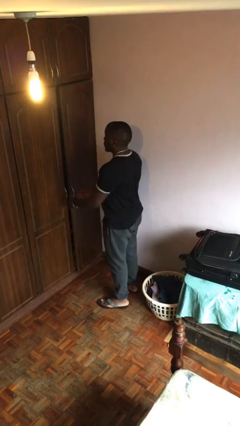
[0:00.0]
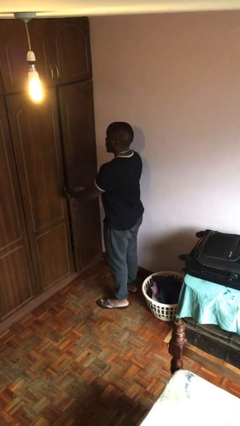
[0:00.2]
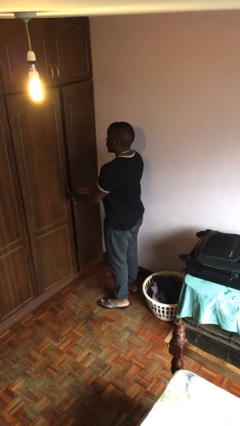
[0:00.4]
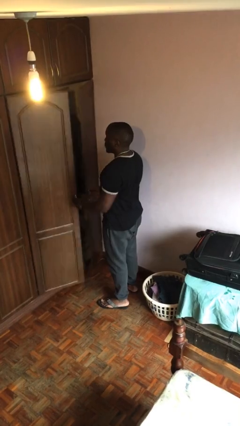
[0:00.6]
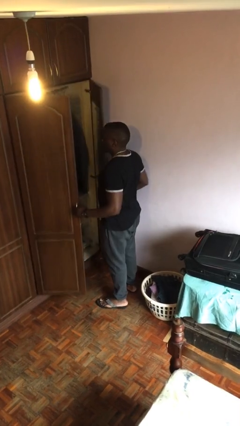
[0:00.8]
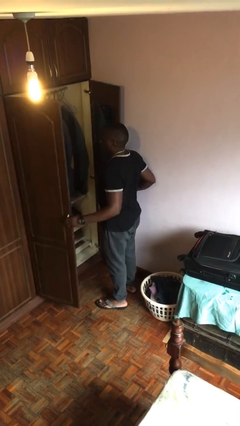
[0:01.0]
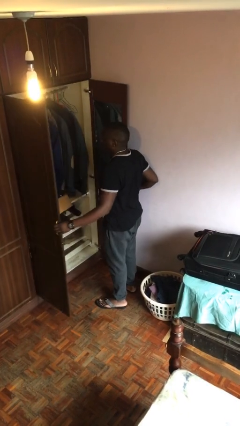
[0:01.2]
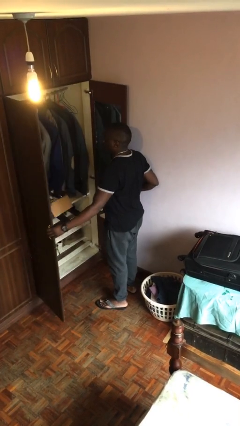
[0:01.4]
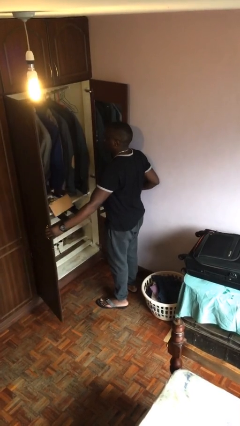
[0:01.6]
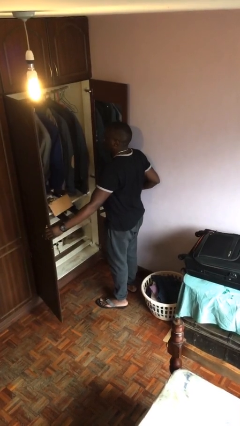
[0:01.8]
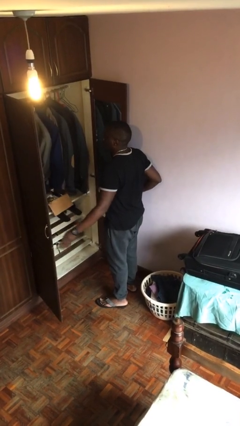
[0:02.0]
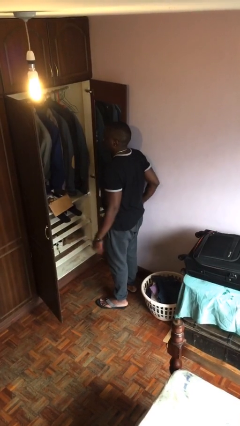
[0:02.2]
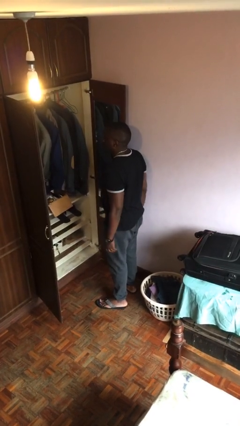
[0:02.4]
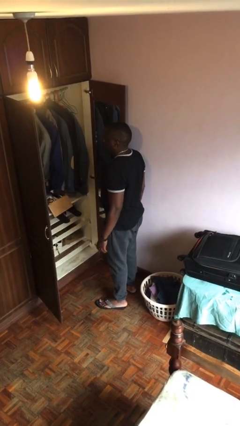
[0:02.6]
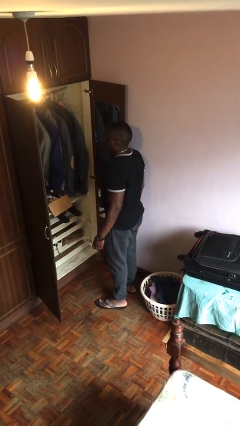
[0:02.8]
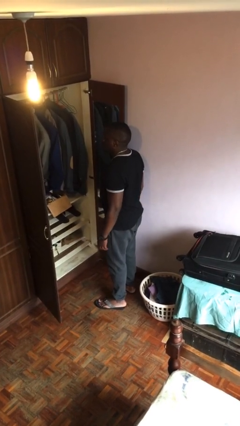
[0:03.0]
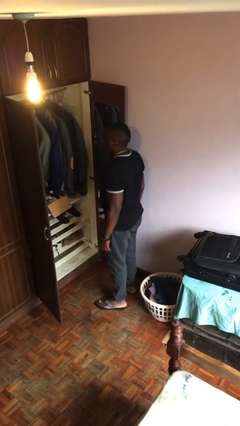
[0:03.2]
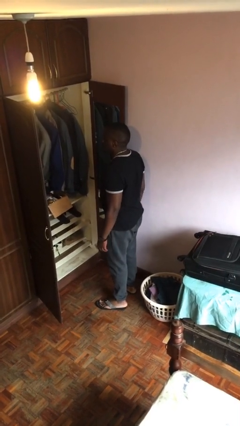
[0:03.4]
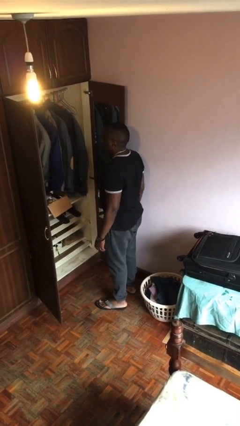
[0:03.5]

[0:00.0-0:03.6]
person opens closet door

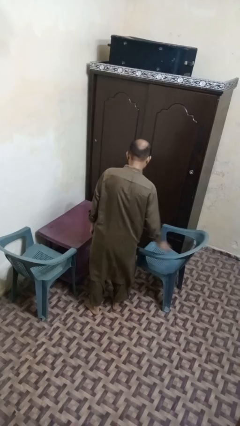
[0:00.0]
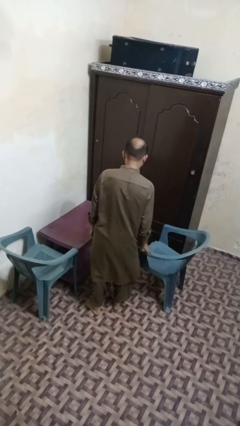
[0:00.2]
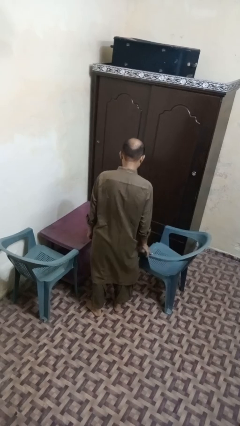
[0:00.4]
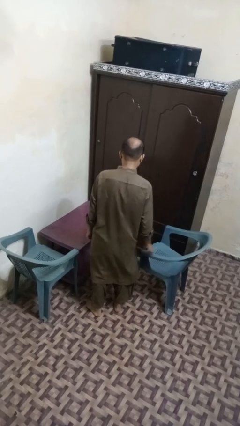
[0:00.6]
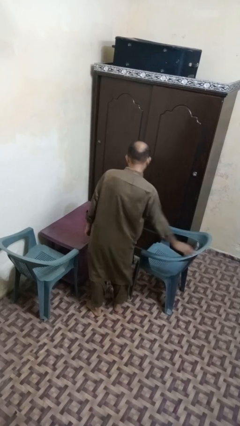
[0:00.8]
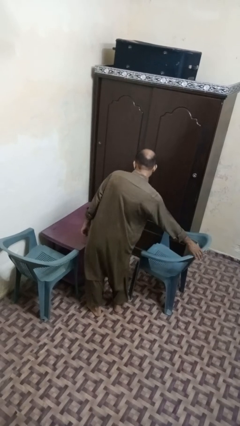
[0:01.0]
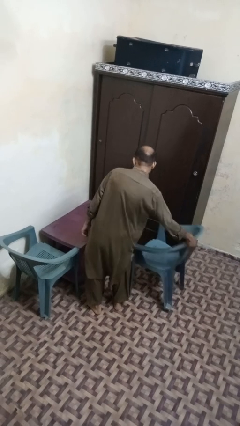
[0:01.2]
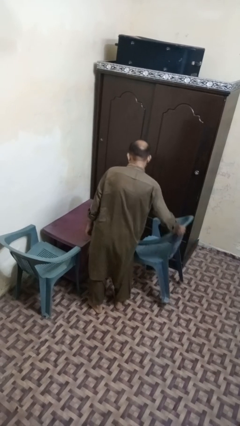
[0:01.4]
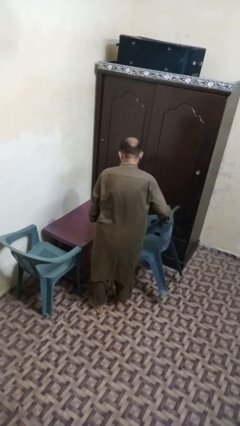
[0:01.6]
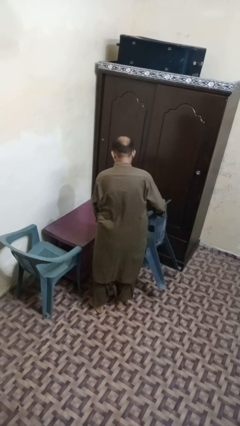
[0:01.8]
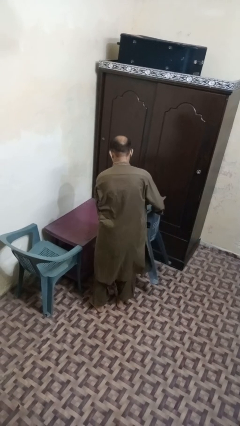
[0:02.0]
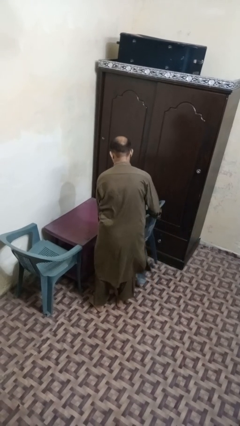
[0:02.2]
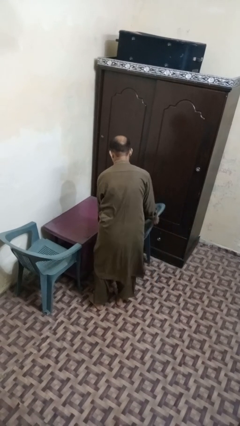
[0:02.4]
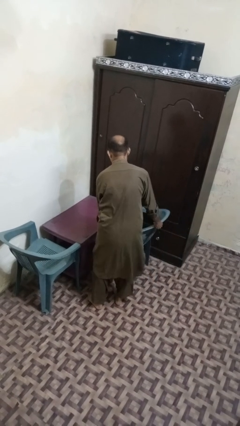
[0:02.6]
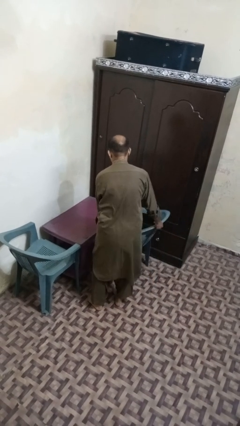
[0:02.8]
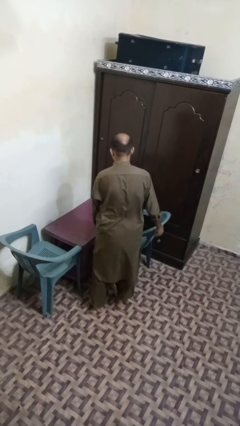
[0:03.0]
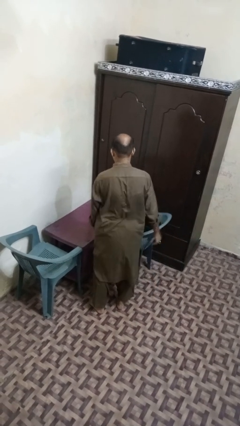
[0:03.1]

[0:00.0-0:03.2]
person pushes in chair

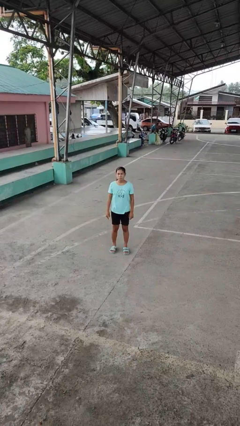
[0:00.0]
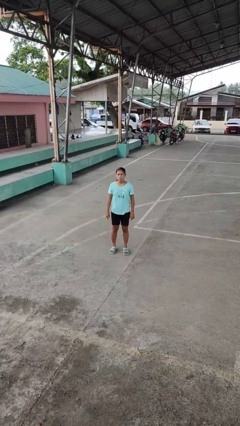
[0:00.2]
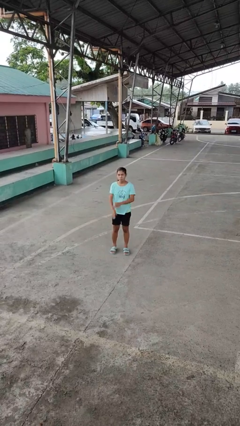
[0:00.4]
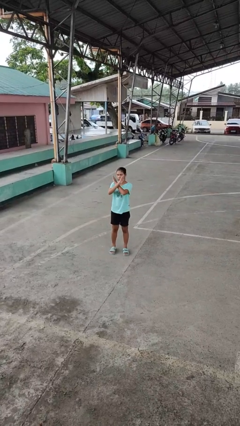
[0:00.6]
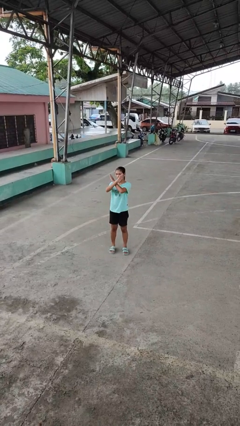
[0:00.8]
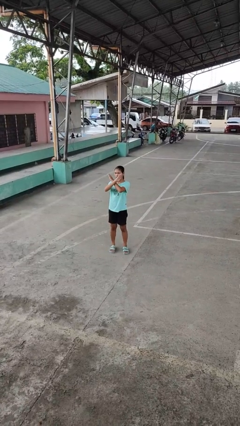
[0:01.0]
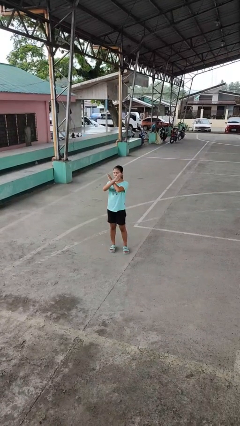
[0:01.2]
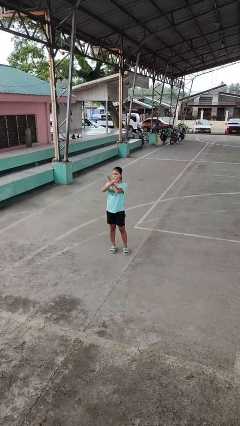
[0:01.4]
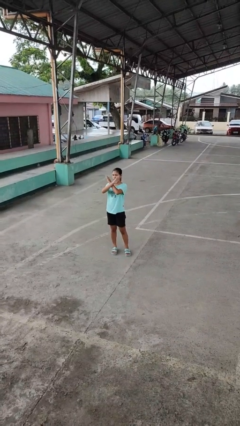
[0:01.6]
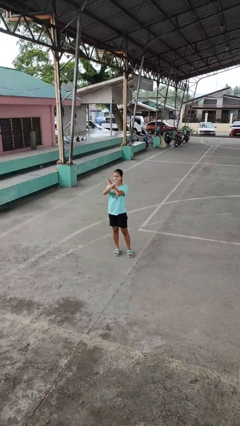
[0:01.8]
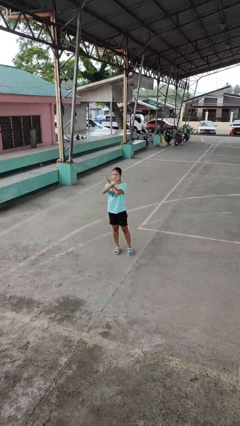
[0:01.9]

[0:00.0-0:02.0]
person gestures arms x

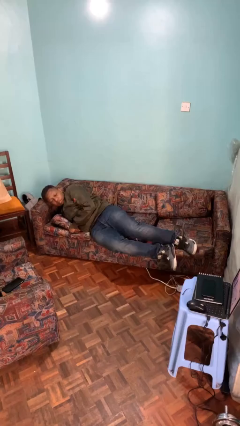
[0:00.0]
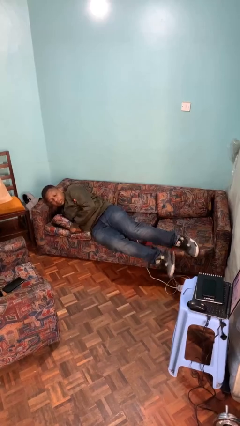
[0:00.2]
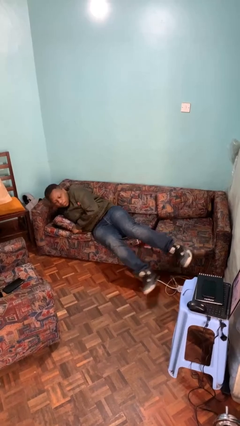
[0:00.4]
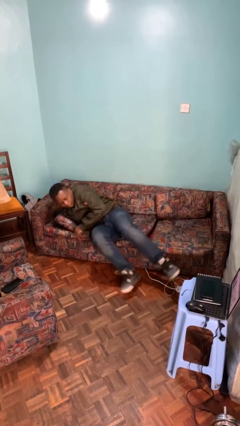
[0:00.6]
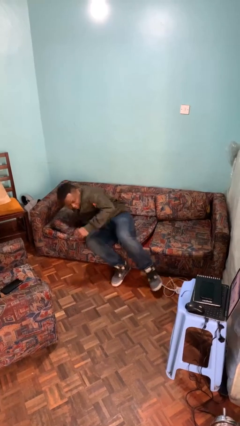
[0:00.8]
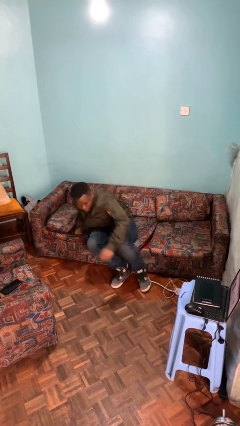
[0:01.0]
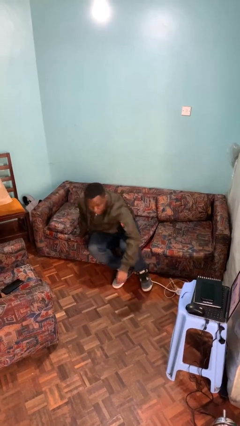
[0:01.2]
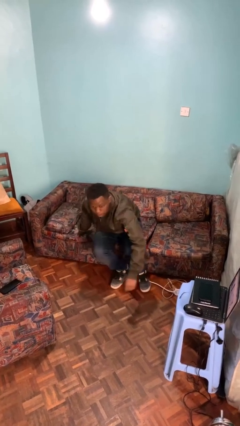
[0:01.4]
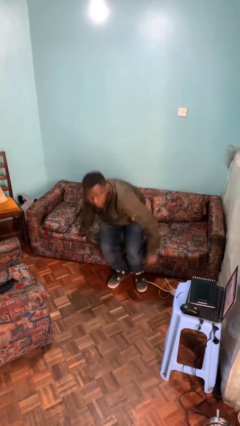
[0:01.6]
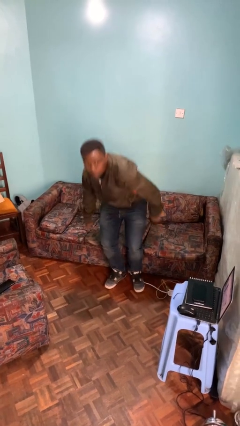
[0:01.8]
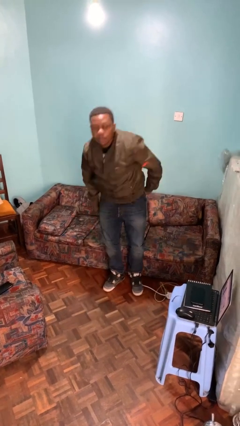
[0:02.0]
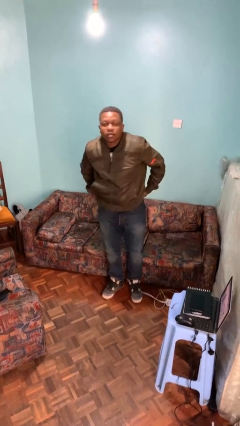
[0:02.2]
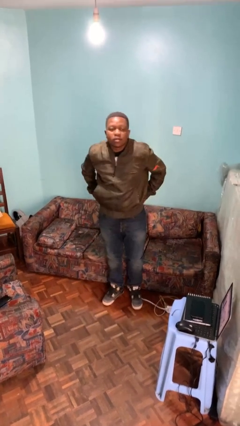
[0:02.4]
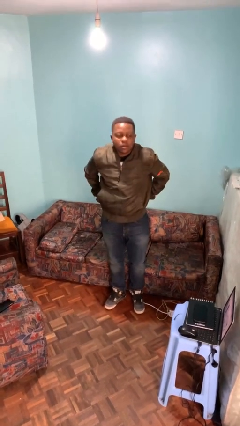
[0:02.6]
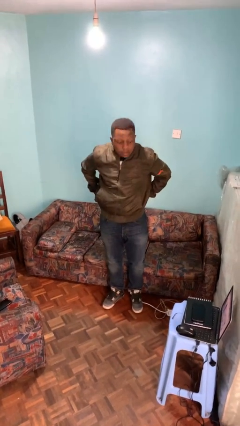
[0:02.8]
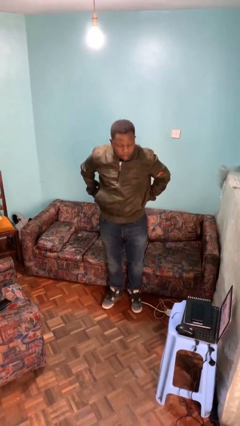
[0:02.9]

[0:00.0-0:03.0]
person stands up

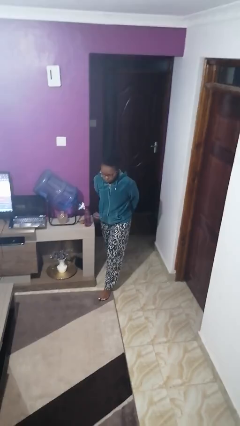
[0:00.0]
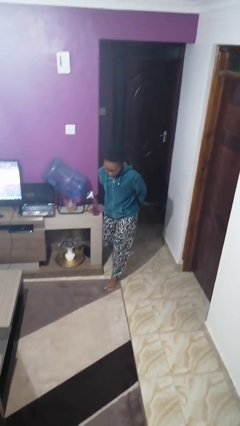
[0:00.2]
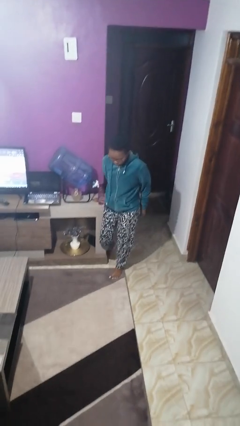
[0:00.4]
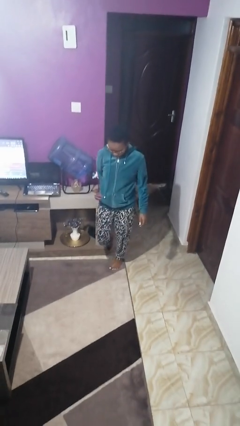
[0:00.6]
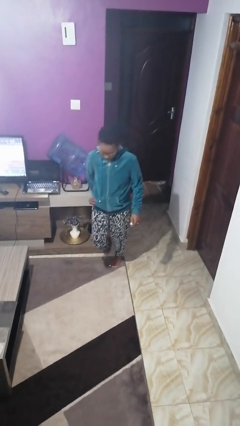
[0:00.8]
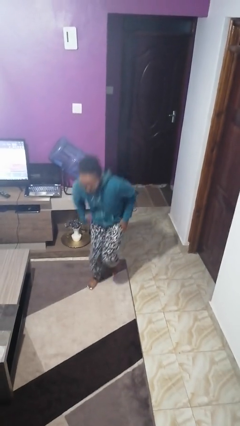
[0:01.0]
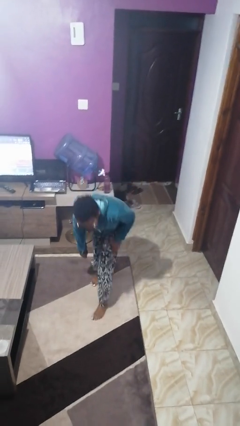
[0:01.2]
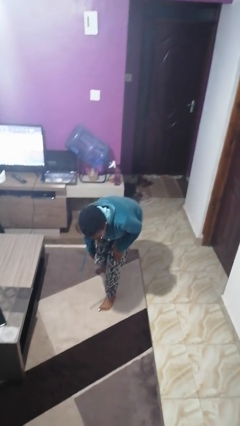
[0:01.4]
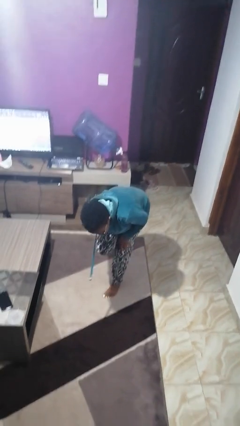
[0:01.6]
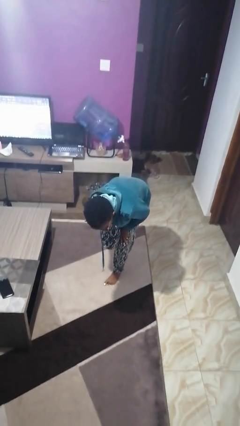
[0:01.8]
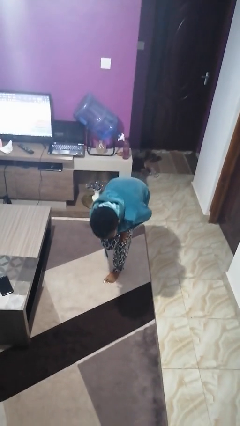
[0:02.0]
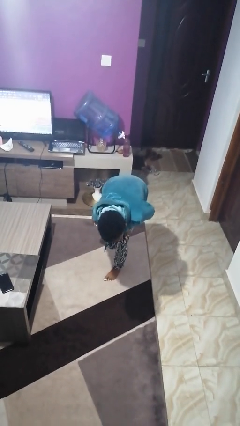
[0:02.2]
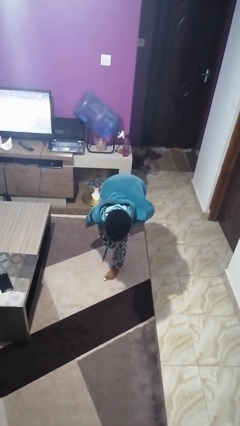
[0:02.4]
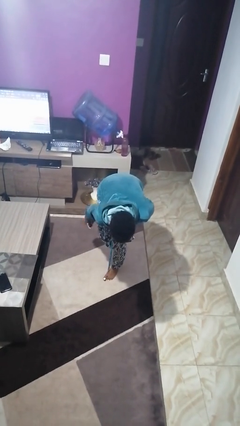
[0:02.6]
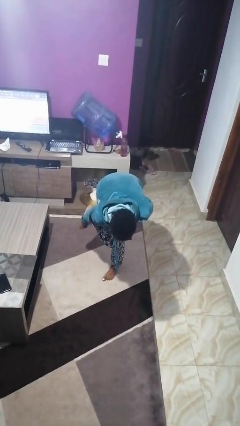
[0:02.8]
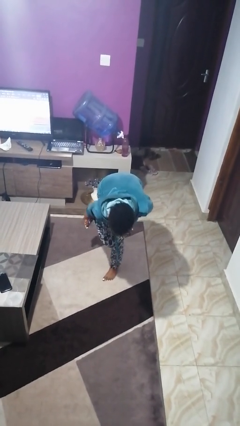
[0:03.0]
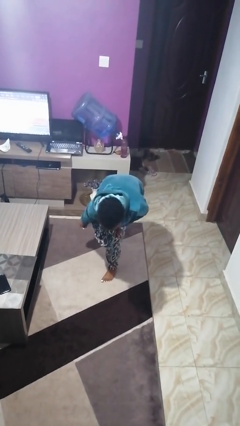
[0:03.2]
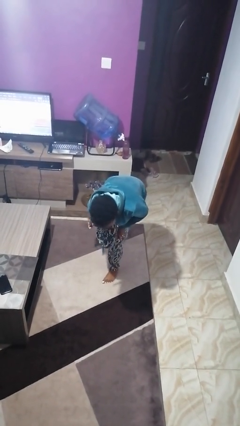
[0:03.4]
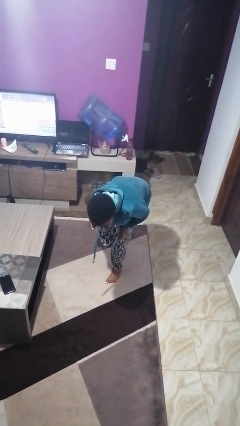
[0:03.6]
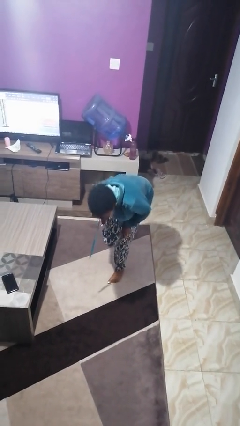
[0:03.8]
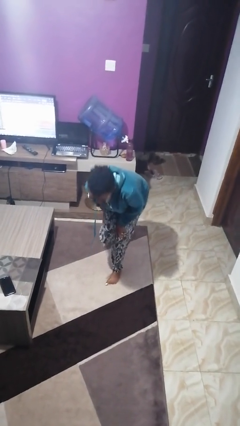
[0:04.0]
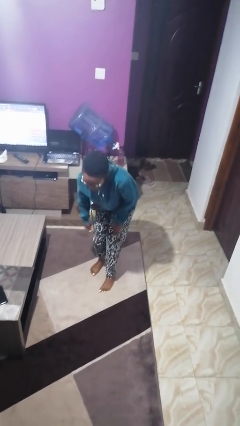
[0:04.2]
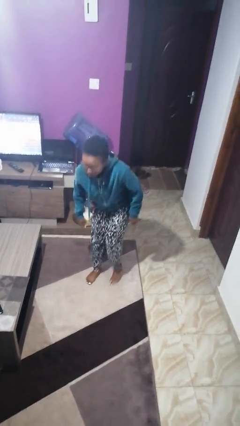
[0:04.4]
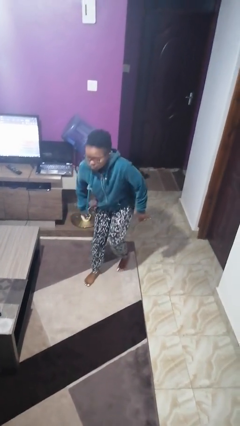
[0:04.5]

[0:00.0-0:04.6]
person stubs toe

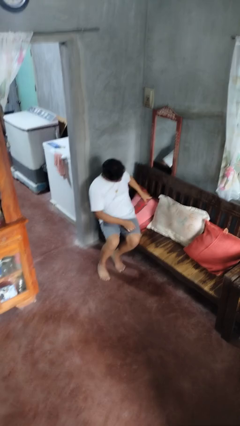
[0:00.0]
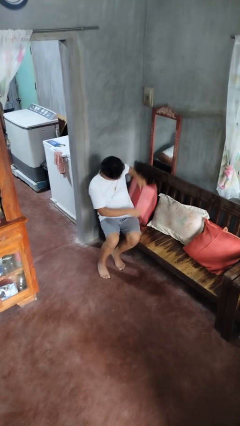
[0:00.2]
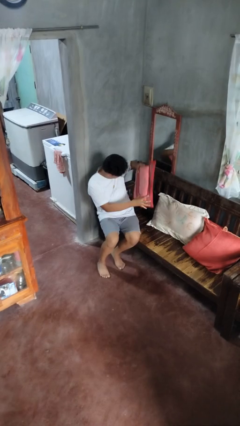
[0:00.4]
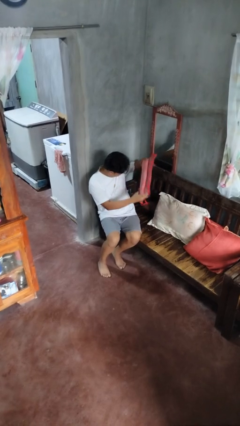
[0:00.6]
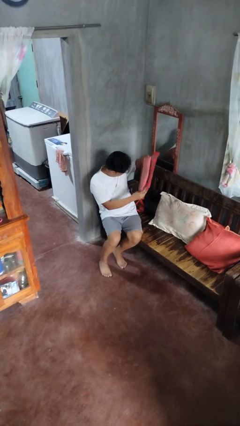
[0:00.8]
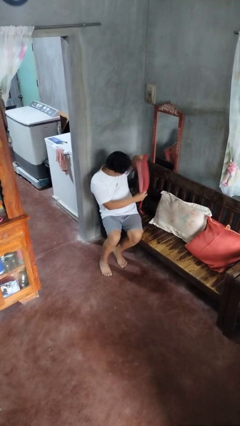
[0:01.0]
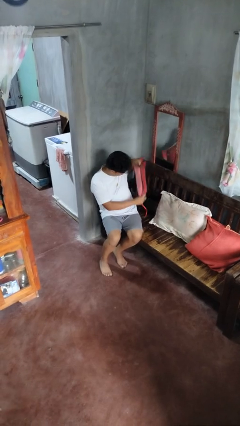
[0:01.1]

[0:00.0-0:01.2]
person searches in couch
